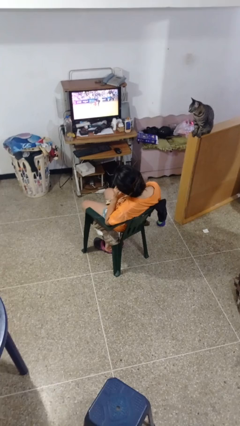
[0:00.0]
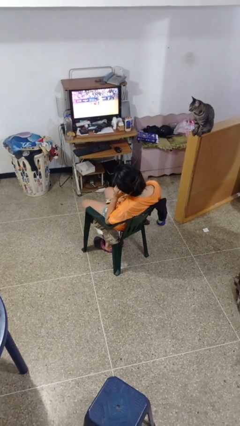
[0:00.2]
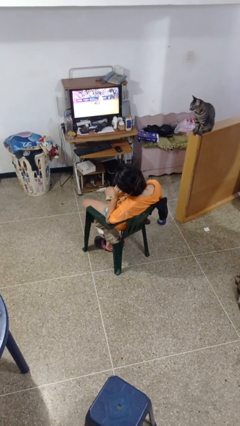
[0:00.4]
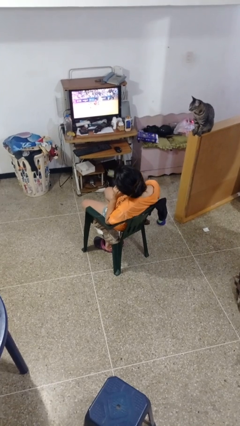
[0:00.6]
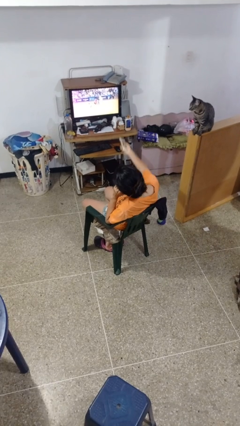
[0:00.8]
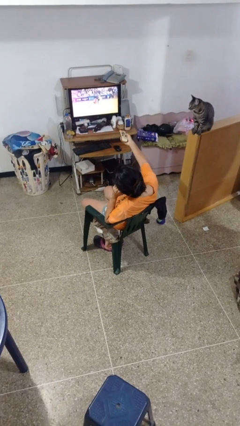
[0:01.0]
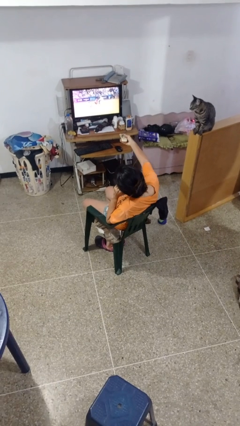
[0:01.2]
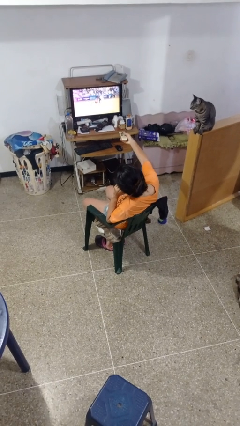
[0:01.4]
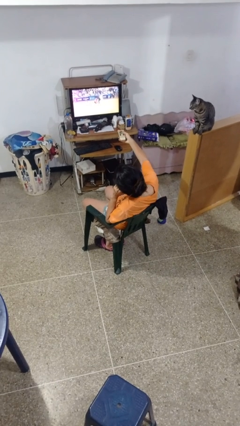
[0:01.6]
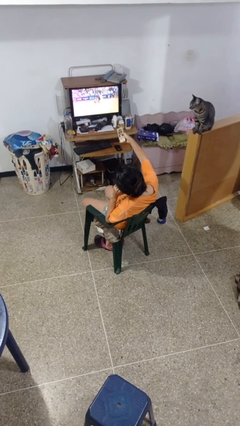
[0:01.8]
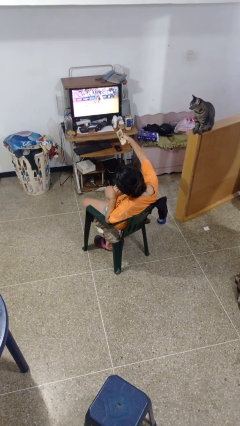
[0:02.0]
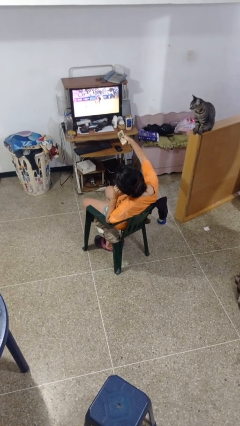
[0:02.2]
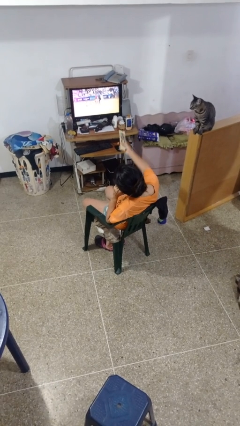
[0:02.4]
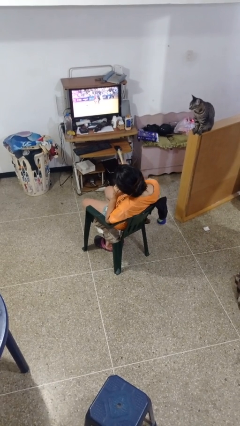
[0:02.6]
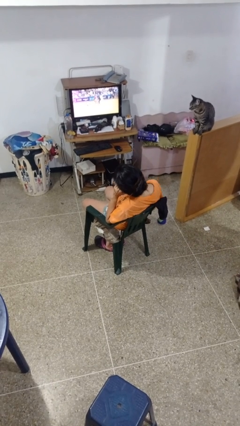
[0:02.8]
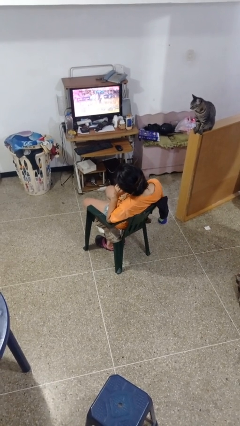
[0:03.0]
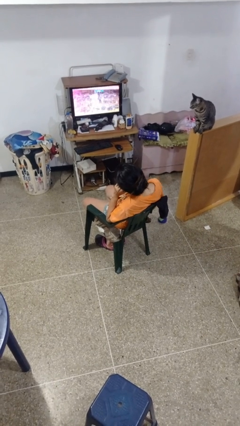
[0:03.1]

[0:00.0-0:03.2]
person uses television remote

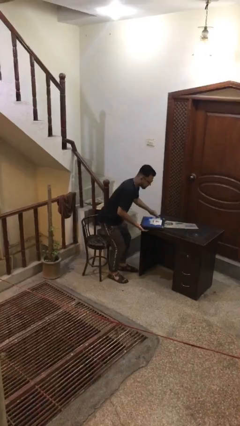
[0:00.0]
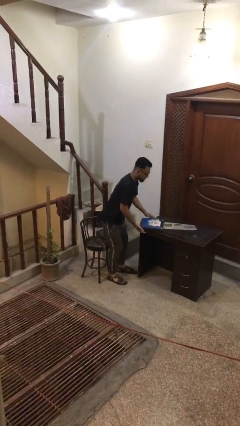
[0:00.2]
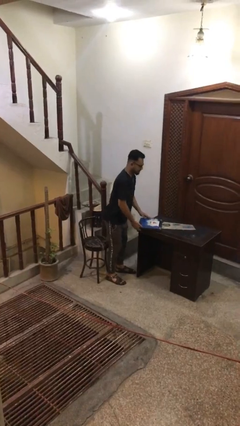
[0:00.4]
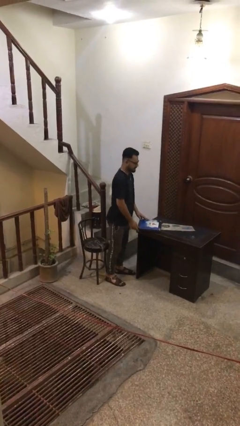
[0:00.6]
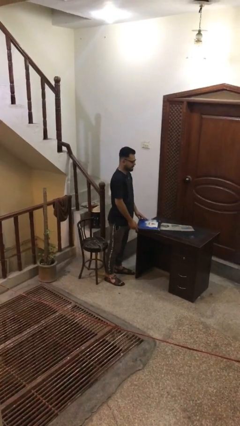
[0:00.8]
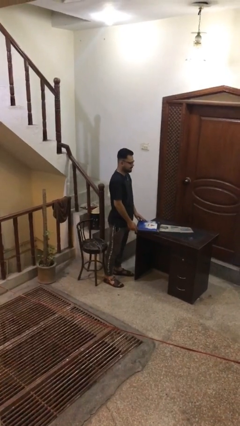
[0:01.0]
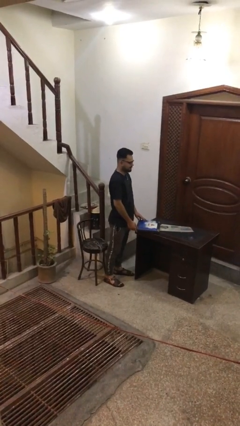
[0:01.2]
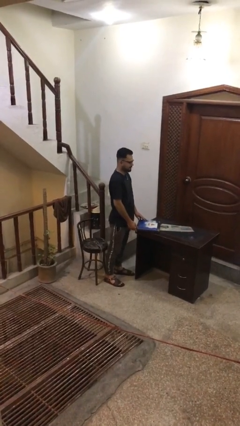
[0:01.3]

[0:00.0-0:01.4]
person stands up

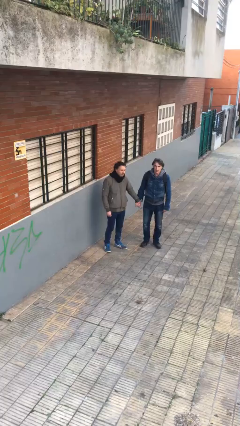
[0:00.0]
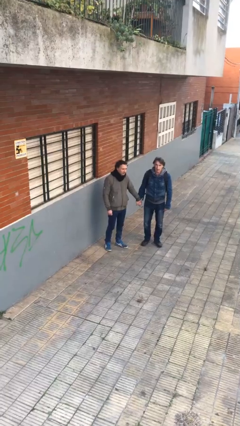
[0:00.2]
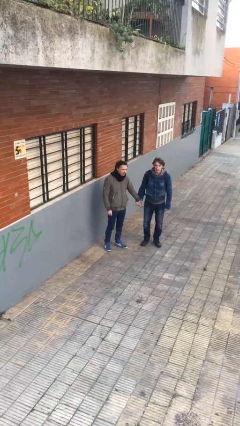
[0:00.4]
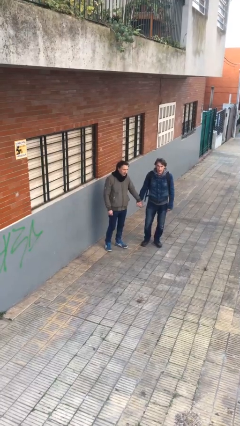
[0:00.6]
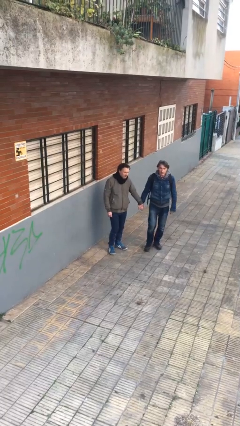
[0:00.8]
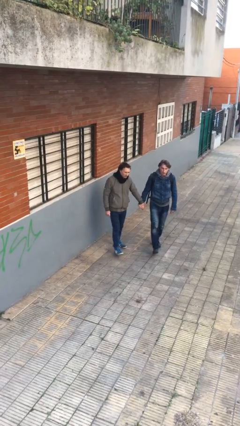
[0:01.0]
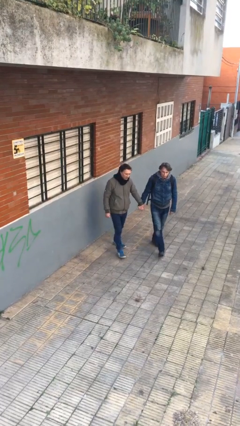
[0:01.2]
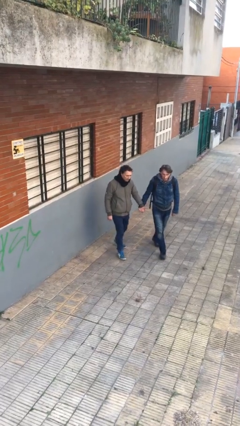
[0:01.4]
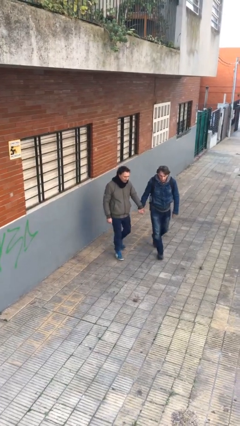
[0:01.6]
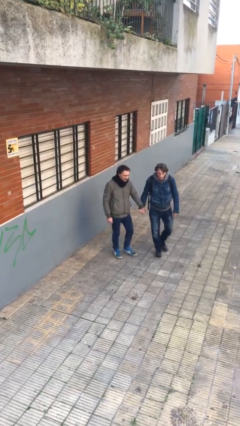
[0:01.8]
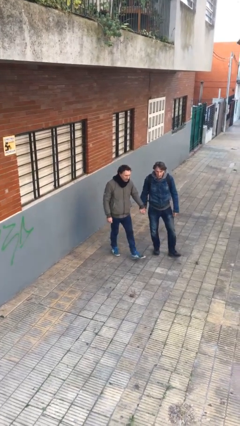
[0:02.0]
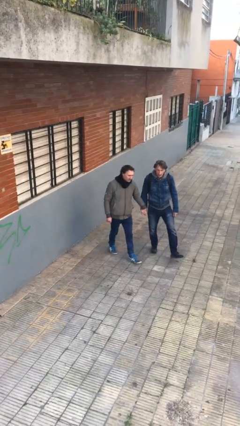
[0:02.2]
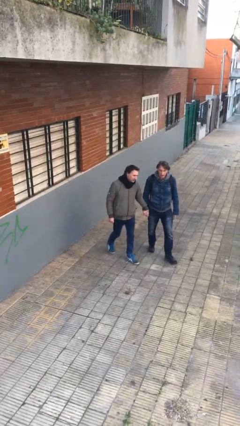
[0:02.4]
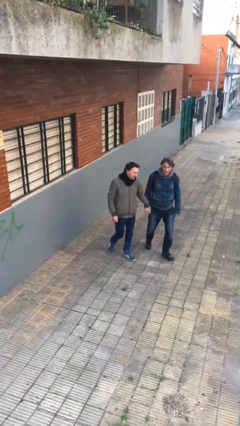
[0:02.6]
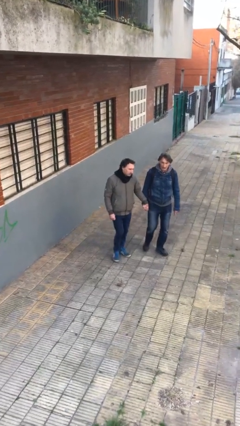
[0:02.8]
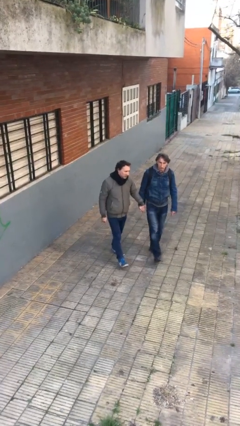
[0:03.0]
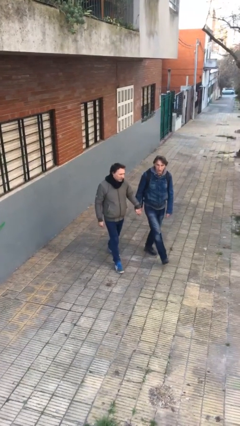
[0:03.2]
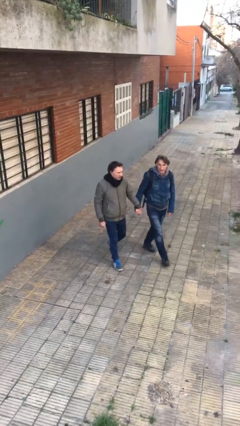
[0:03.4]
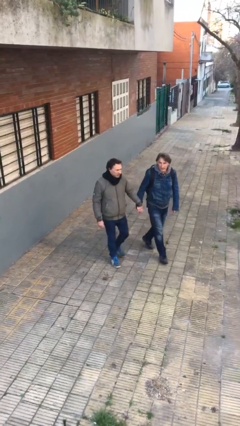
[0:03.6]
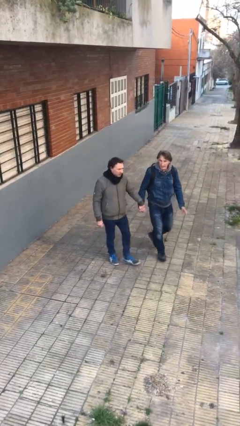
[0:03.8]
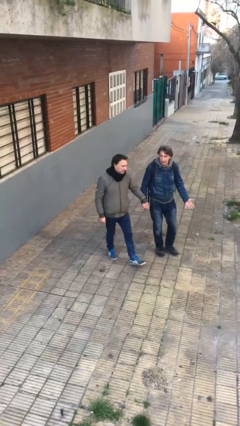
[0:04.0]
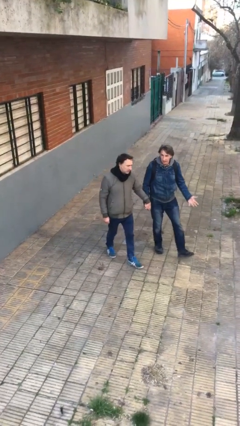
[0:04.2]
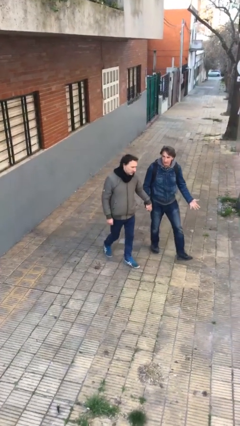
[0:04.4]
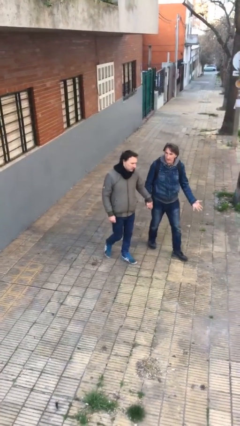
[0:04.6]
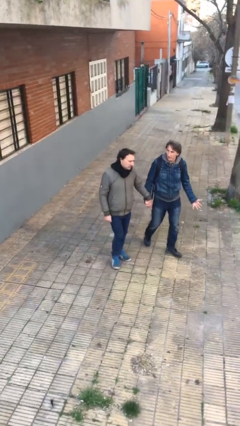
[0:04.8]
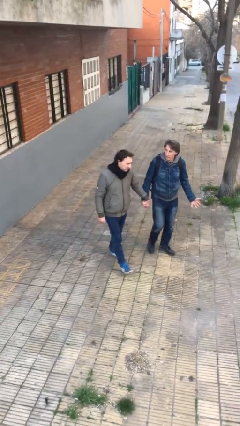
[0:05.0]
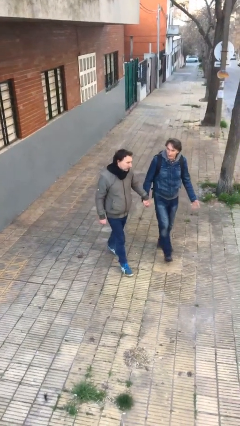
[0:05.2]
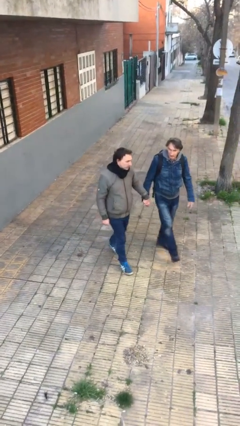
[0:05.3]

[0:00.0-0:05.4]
person holds hand

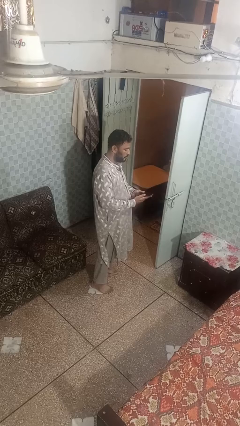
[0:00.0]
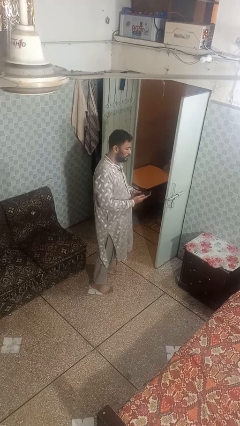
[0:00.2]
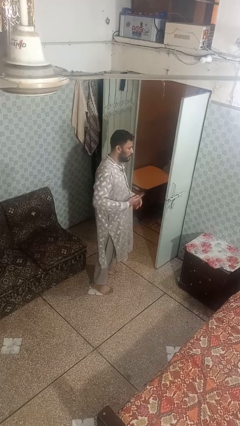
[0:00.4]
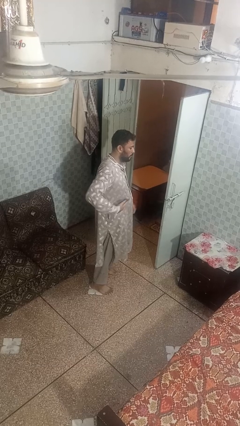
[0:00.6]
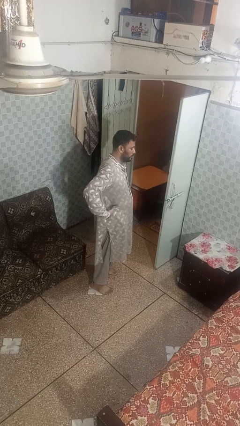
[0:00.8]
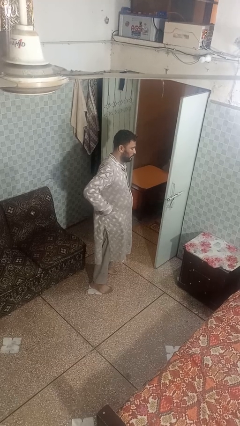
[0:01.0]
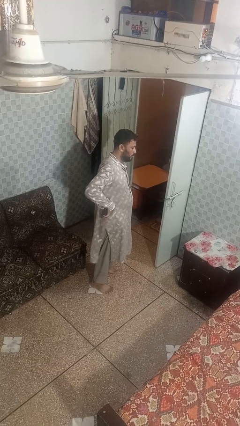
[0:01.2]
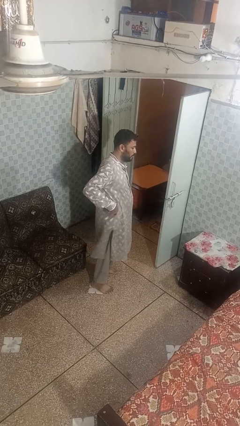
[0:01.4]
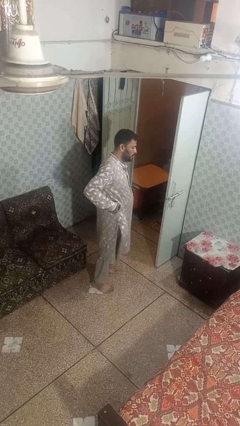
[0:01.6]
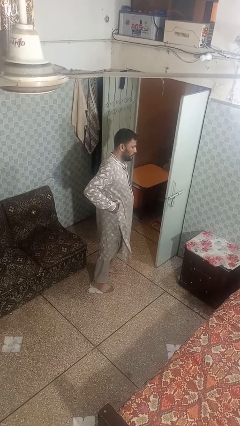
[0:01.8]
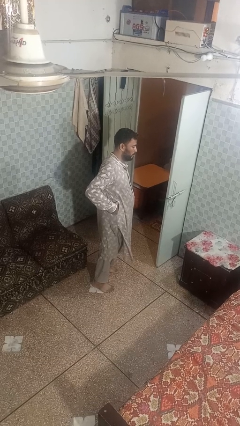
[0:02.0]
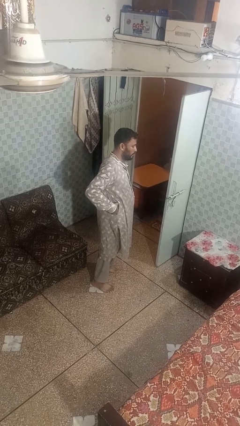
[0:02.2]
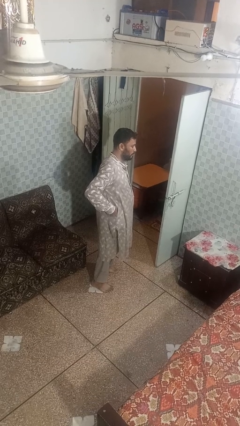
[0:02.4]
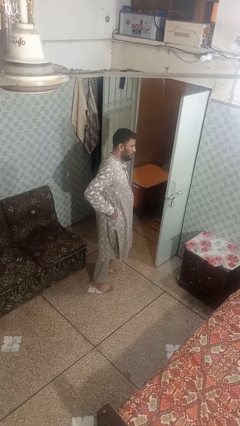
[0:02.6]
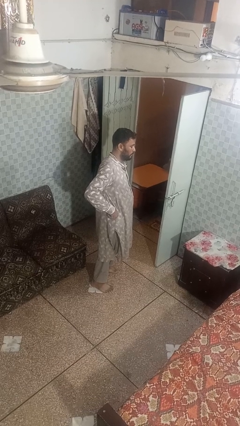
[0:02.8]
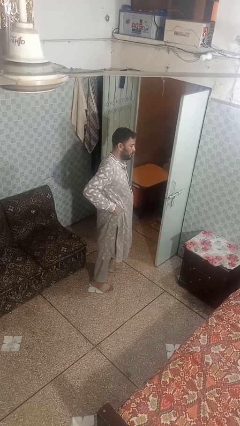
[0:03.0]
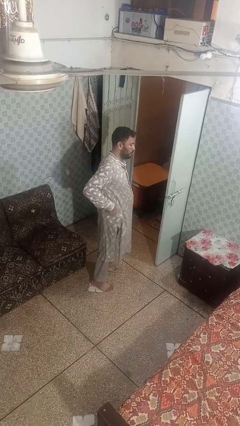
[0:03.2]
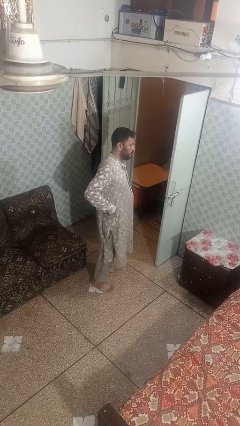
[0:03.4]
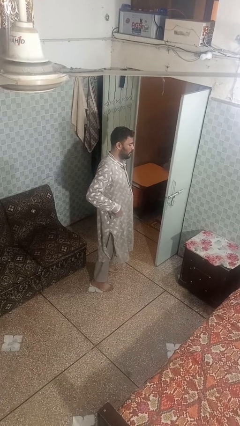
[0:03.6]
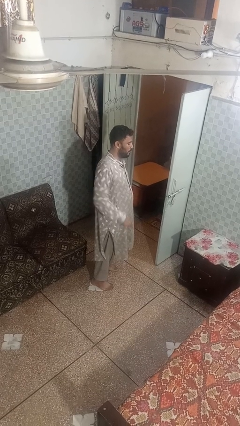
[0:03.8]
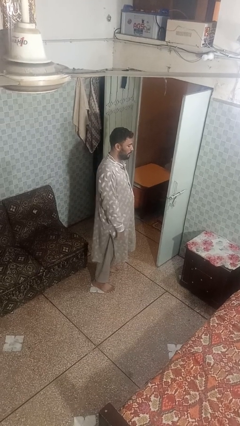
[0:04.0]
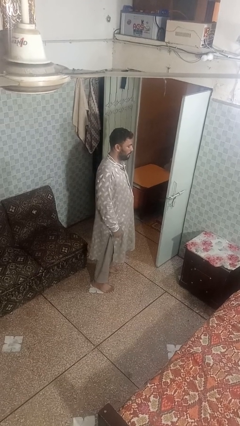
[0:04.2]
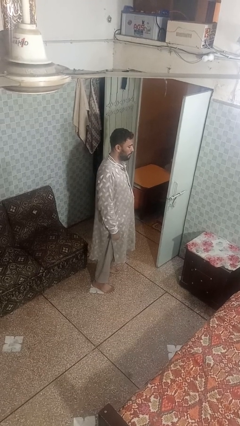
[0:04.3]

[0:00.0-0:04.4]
person puts phone into pocket

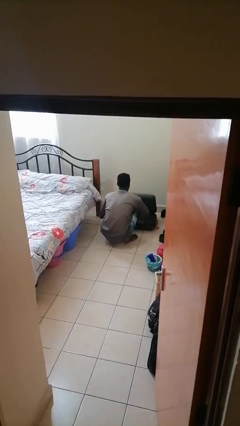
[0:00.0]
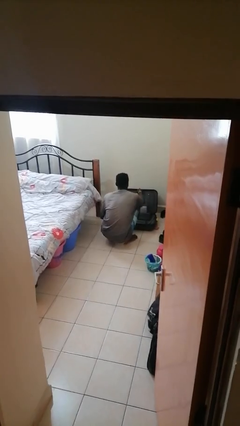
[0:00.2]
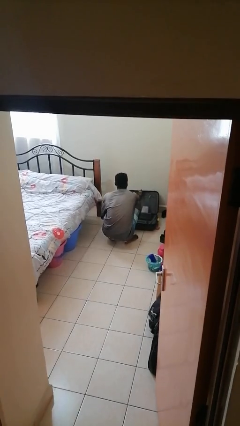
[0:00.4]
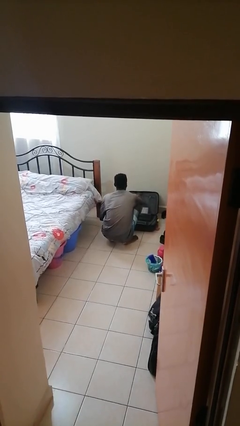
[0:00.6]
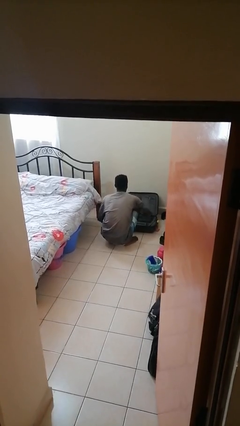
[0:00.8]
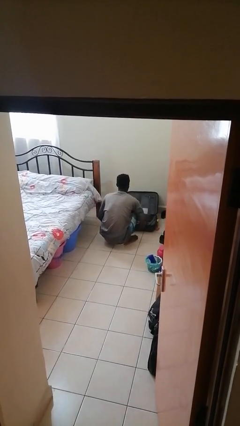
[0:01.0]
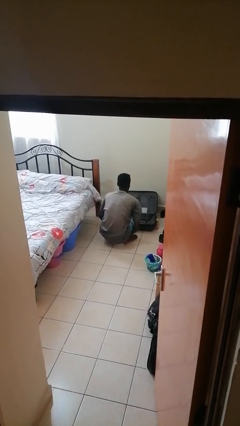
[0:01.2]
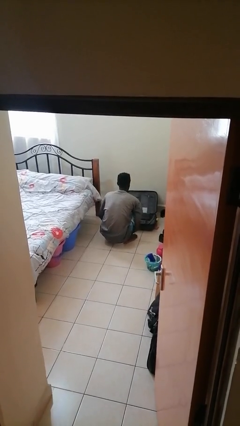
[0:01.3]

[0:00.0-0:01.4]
person opens suitcase

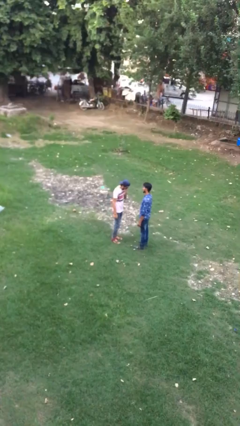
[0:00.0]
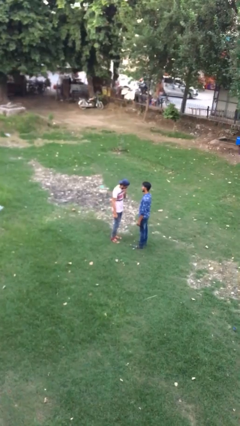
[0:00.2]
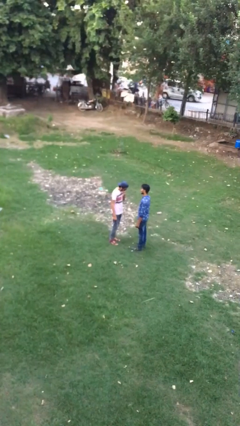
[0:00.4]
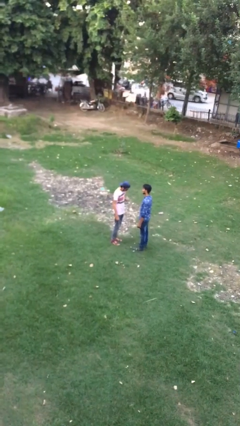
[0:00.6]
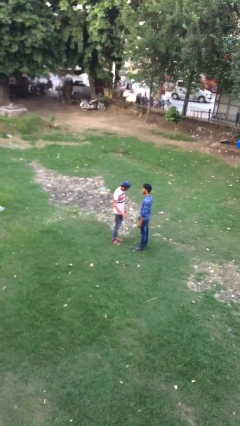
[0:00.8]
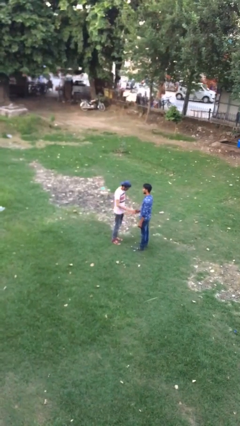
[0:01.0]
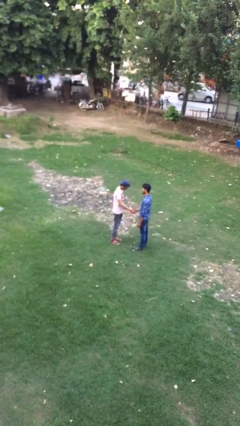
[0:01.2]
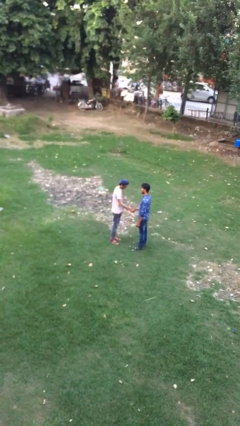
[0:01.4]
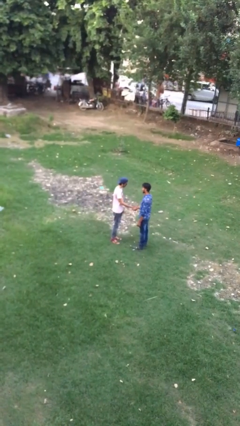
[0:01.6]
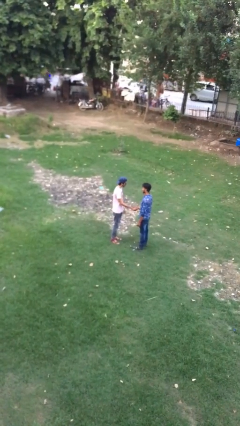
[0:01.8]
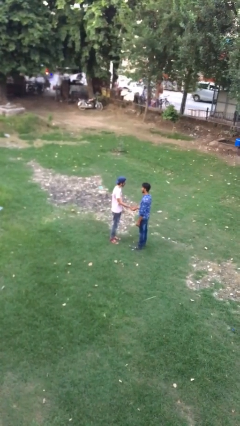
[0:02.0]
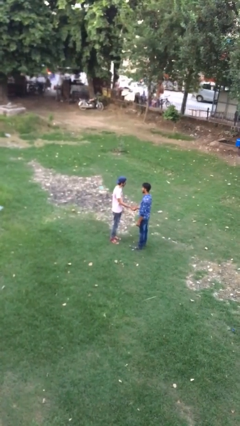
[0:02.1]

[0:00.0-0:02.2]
person shakes hand
